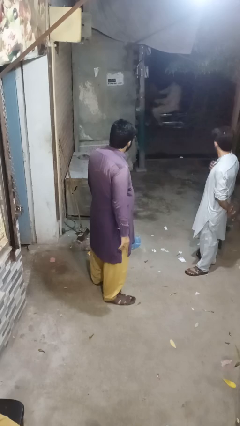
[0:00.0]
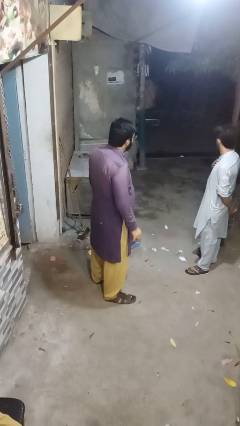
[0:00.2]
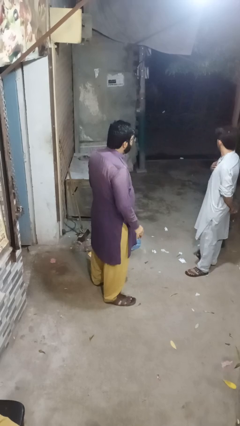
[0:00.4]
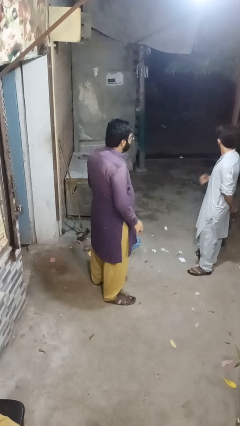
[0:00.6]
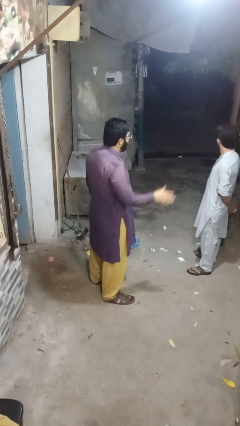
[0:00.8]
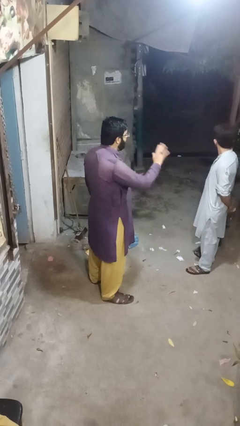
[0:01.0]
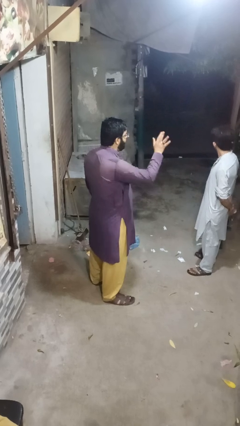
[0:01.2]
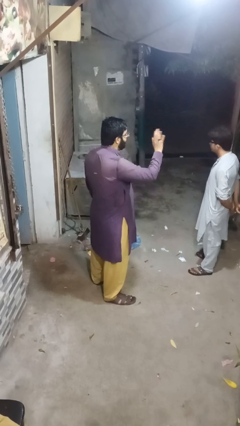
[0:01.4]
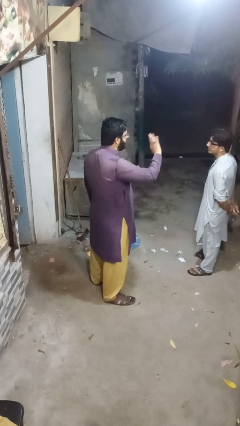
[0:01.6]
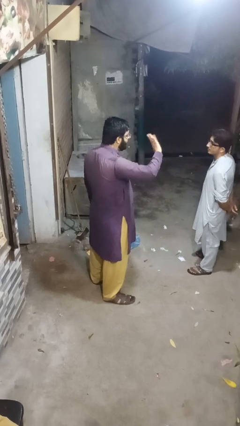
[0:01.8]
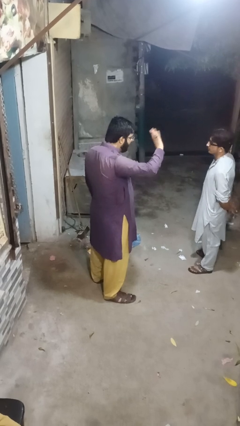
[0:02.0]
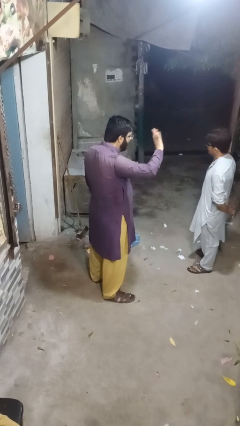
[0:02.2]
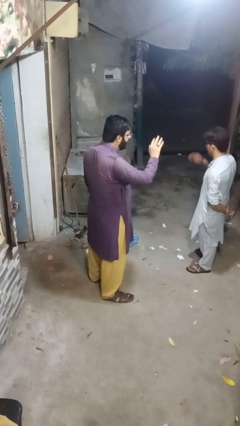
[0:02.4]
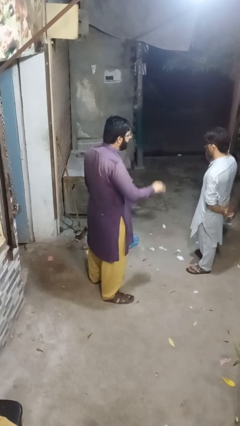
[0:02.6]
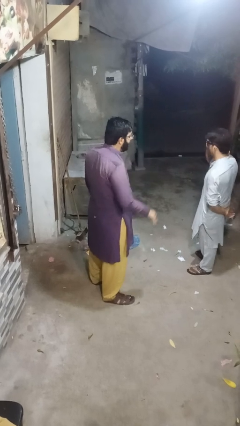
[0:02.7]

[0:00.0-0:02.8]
person waves at person

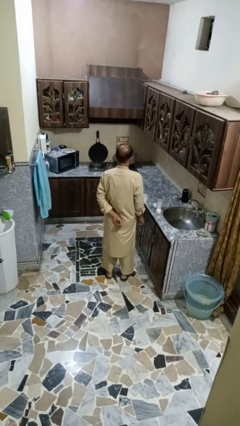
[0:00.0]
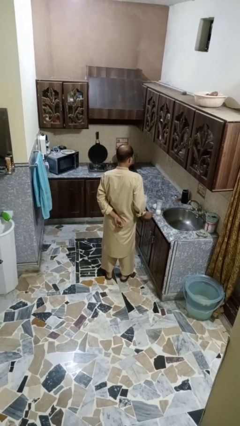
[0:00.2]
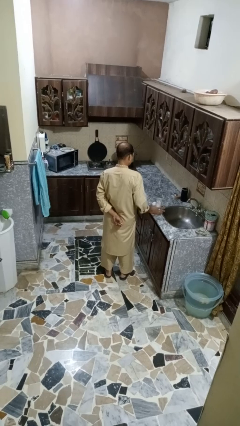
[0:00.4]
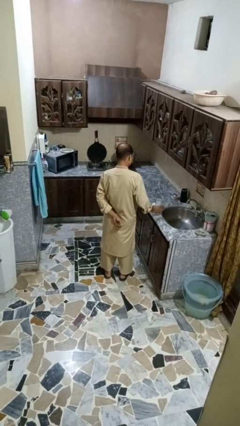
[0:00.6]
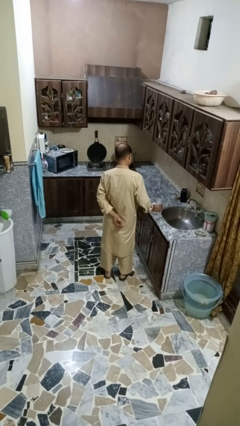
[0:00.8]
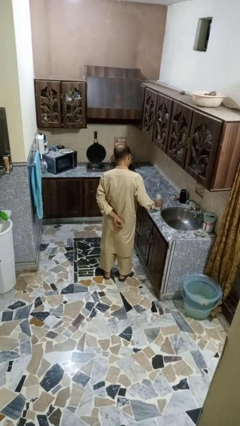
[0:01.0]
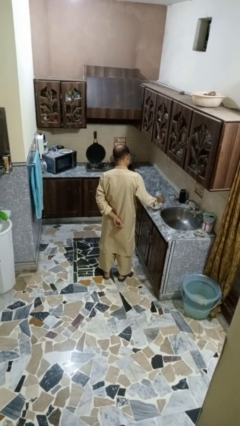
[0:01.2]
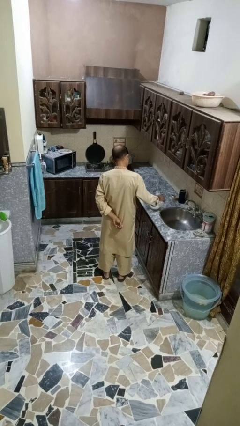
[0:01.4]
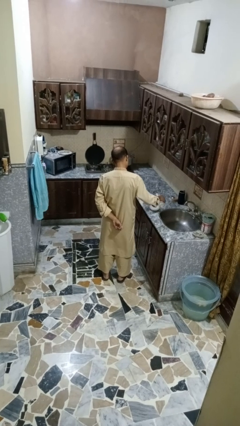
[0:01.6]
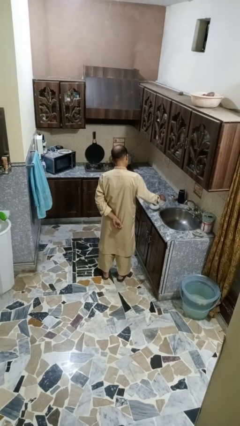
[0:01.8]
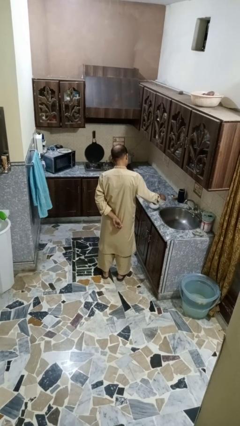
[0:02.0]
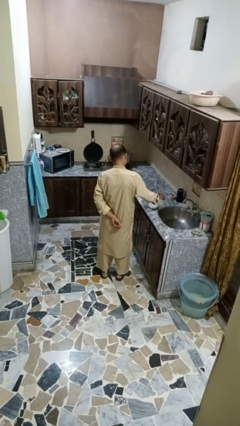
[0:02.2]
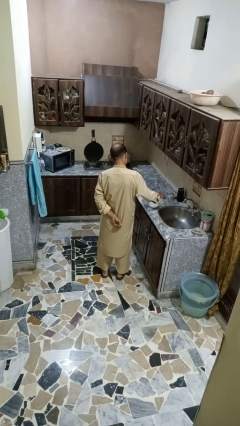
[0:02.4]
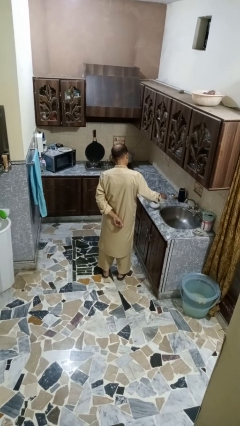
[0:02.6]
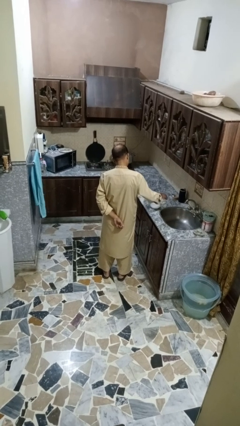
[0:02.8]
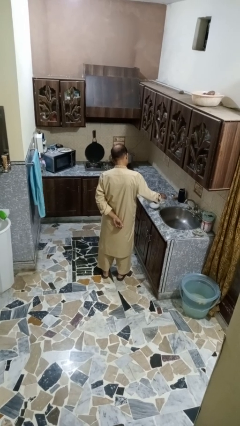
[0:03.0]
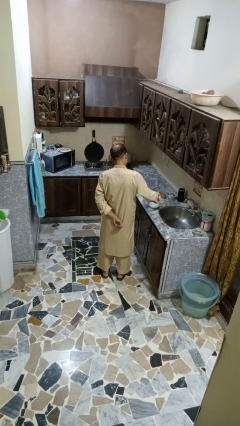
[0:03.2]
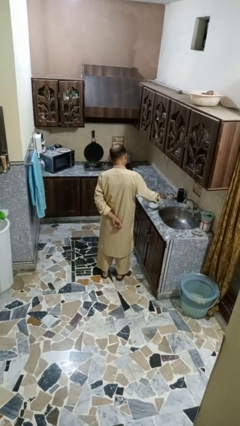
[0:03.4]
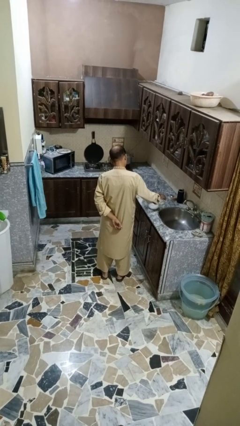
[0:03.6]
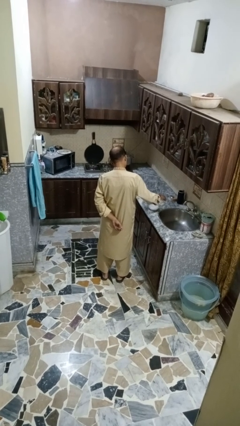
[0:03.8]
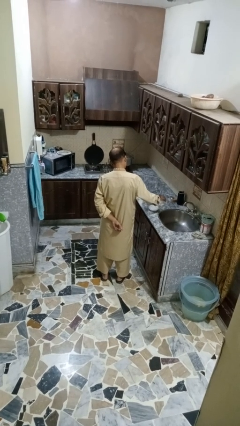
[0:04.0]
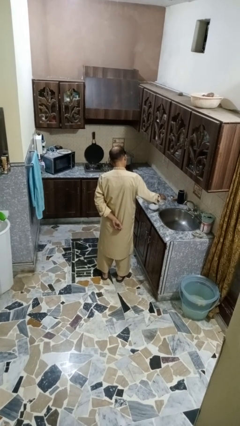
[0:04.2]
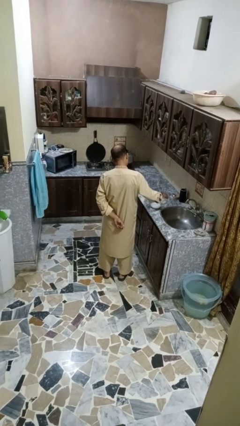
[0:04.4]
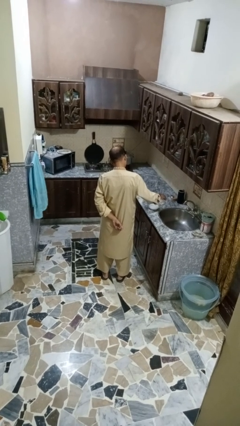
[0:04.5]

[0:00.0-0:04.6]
person pours into bowl

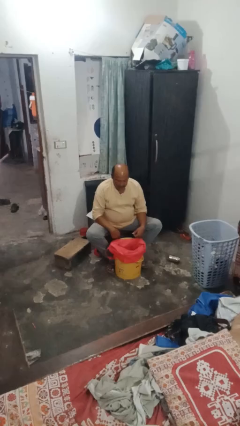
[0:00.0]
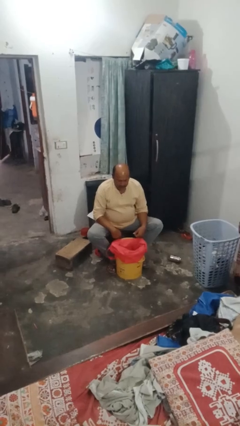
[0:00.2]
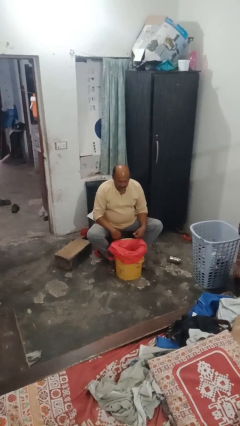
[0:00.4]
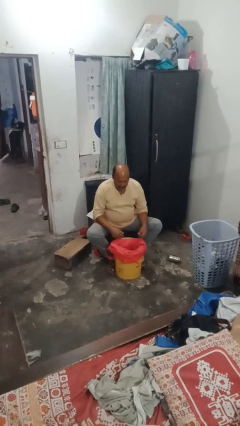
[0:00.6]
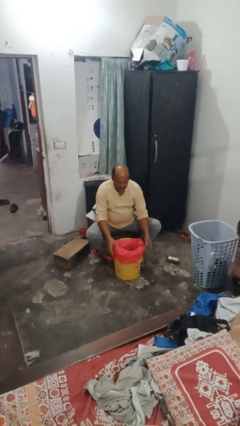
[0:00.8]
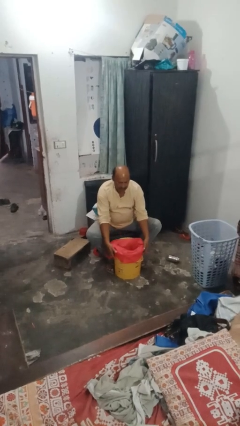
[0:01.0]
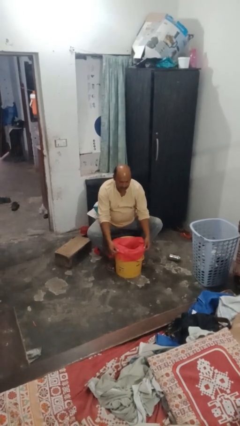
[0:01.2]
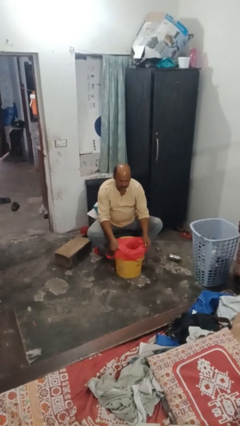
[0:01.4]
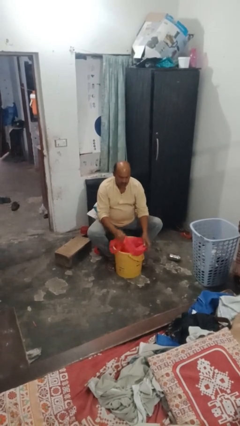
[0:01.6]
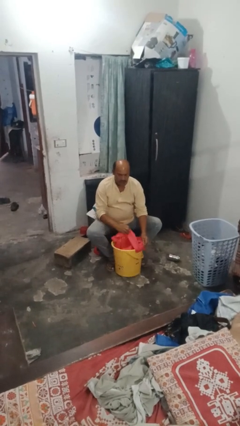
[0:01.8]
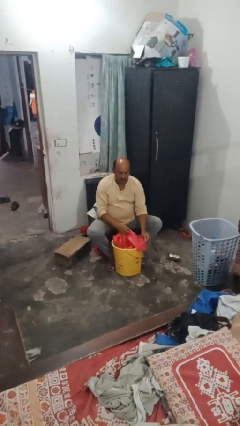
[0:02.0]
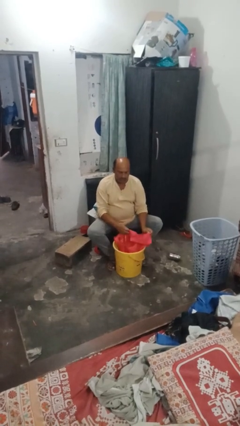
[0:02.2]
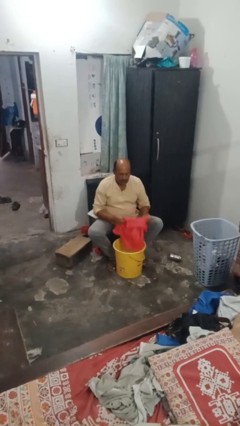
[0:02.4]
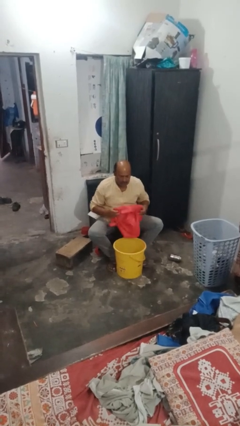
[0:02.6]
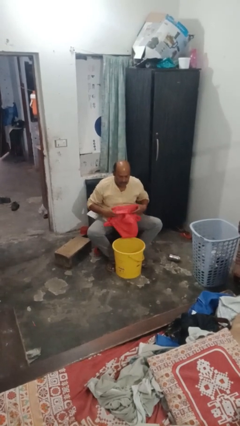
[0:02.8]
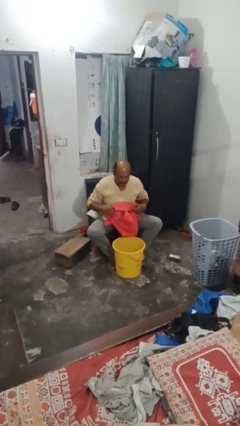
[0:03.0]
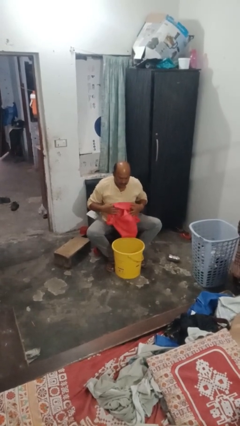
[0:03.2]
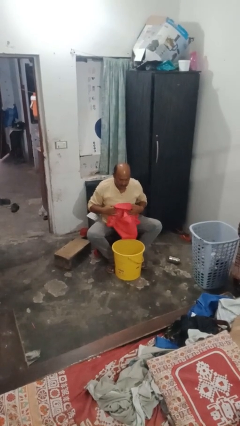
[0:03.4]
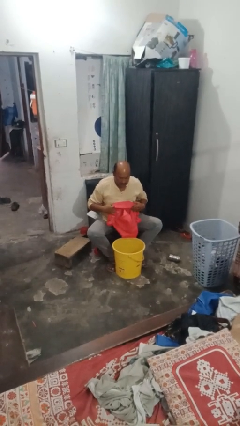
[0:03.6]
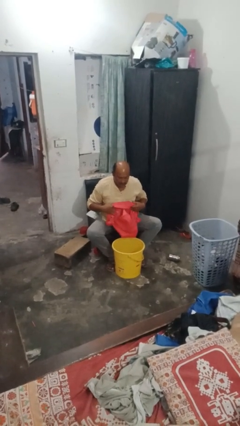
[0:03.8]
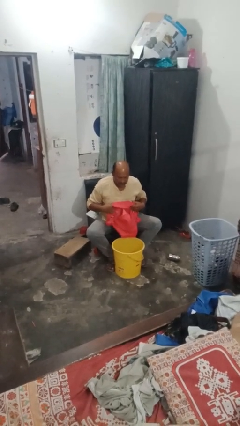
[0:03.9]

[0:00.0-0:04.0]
person removes trashbag from trashcan

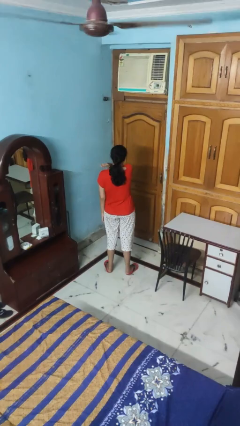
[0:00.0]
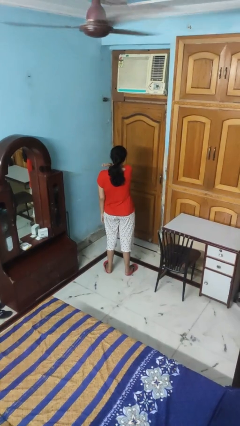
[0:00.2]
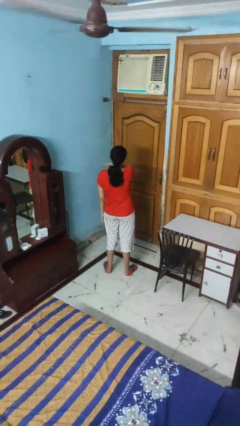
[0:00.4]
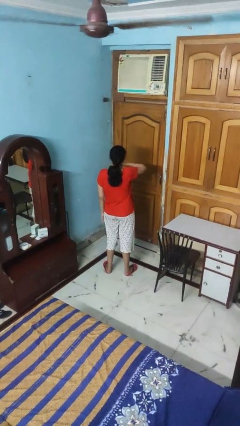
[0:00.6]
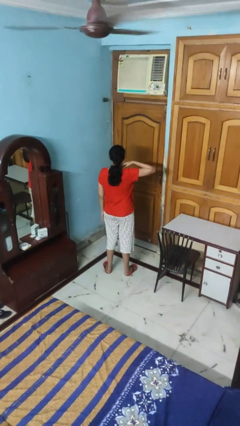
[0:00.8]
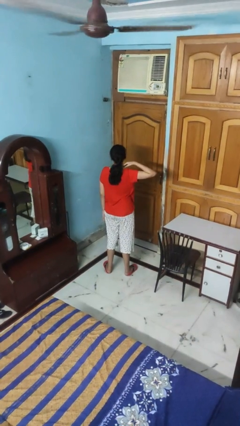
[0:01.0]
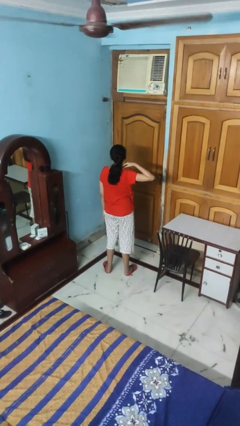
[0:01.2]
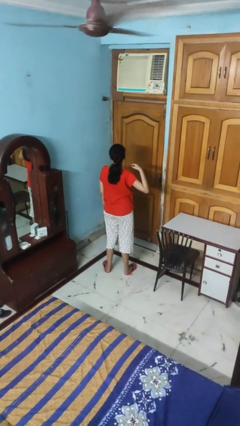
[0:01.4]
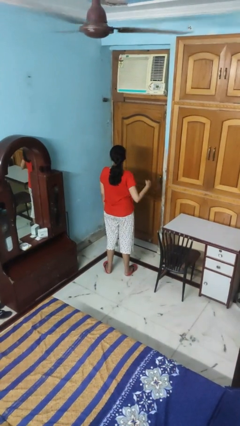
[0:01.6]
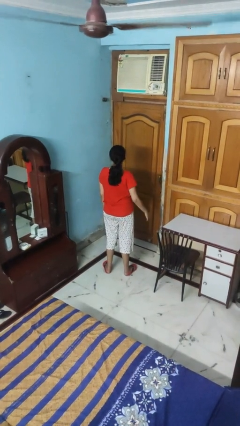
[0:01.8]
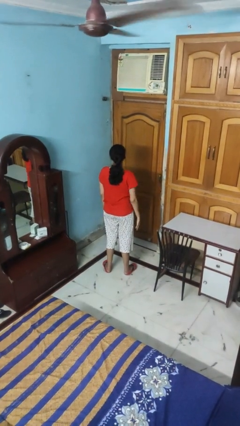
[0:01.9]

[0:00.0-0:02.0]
person gestures cut

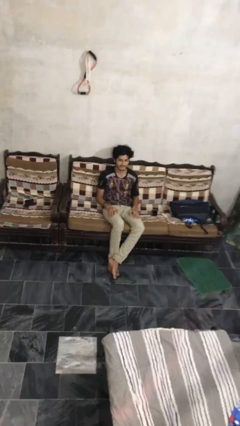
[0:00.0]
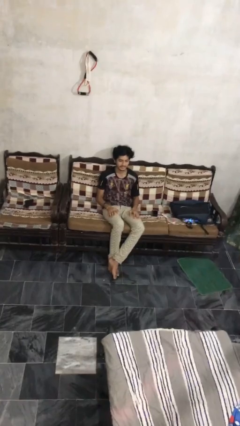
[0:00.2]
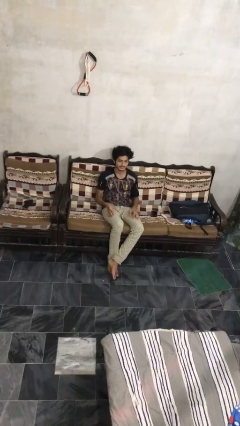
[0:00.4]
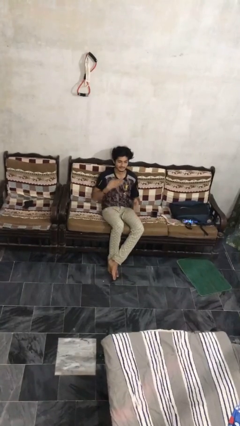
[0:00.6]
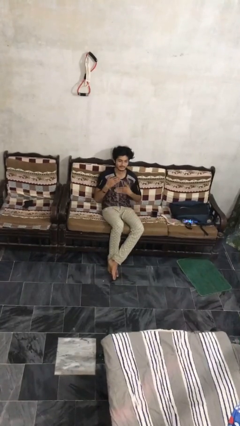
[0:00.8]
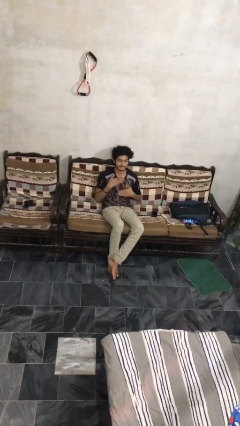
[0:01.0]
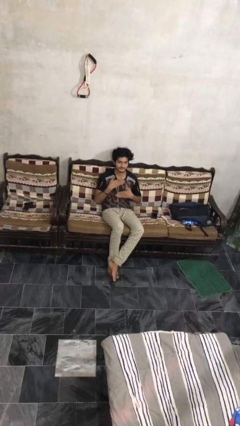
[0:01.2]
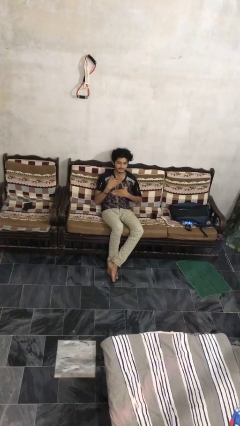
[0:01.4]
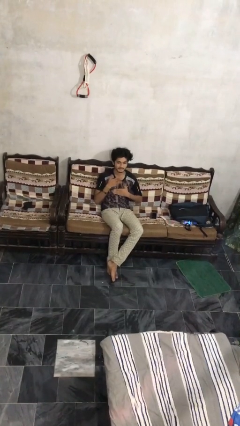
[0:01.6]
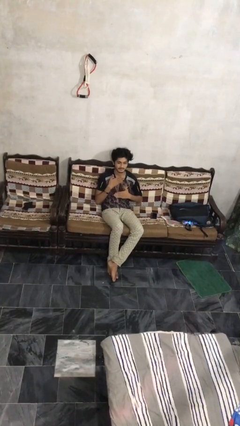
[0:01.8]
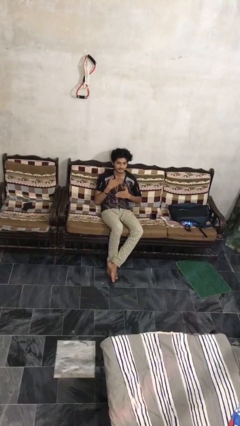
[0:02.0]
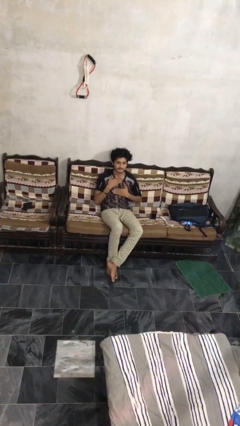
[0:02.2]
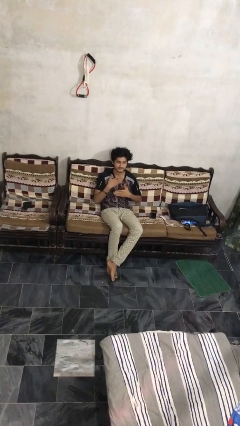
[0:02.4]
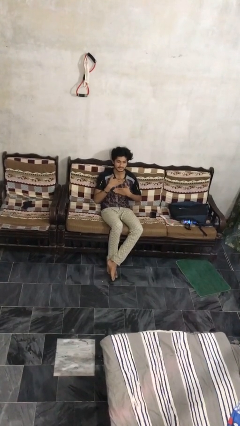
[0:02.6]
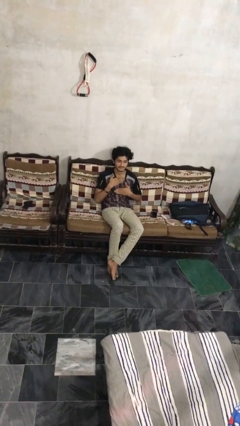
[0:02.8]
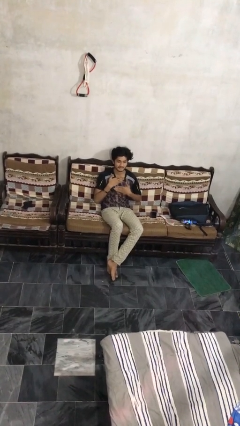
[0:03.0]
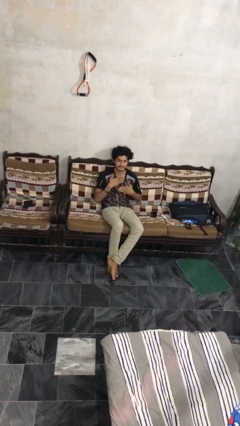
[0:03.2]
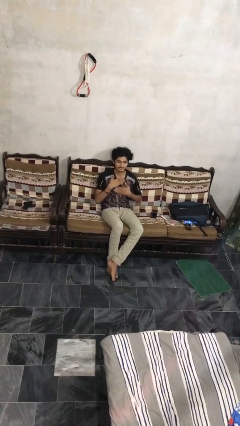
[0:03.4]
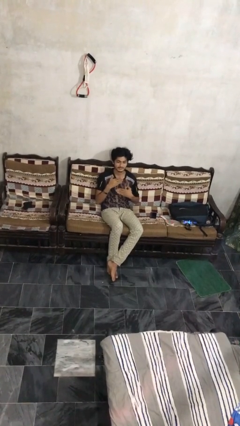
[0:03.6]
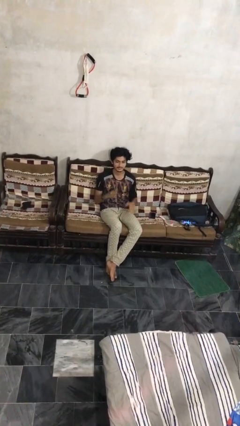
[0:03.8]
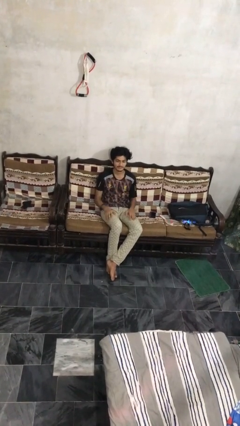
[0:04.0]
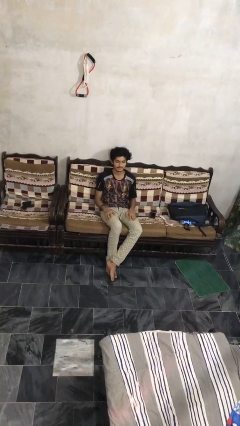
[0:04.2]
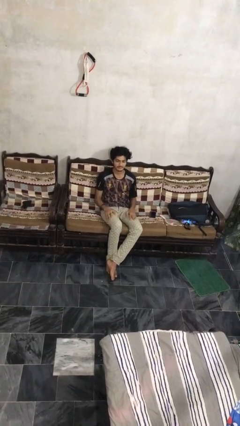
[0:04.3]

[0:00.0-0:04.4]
person drums on chest
